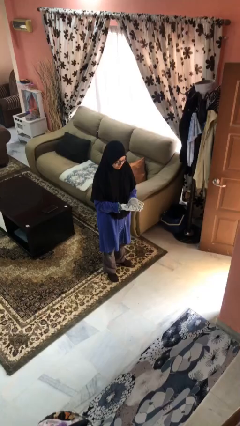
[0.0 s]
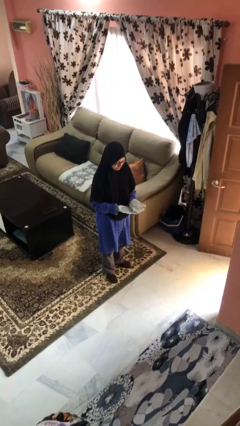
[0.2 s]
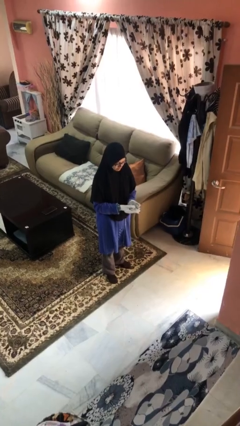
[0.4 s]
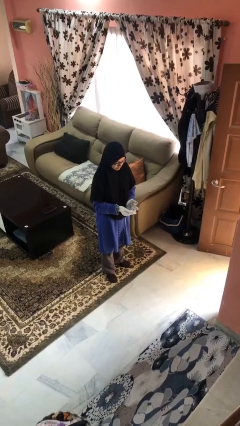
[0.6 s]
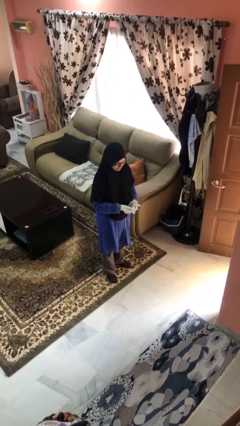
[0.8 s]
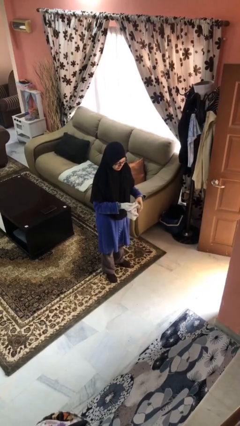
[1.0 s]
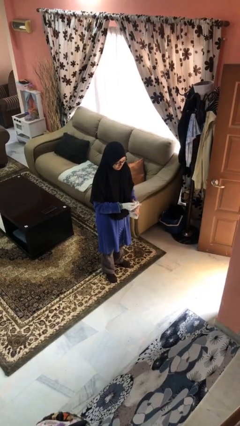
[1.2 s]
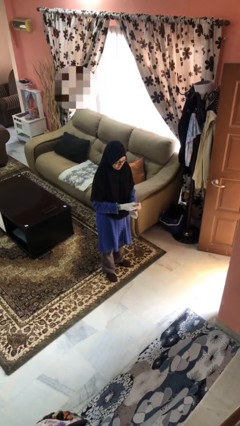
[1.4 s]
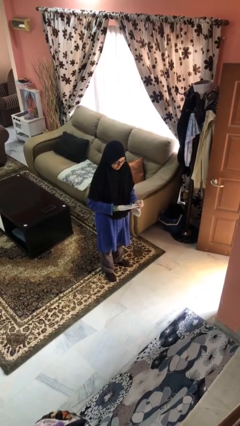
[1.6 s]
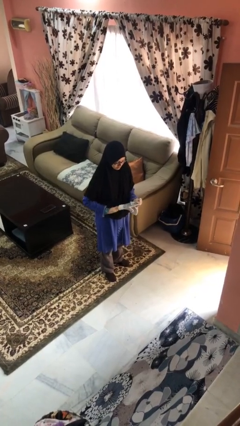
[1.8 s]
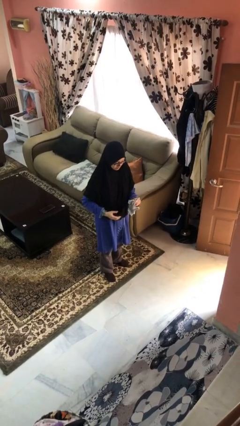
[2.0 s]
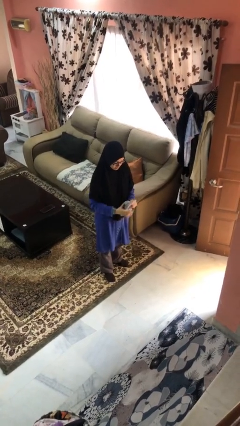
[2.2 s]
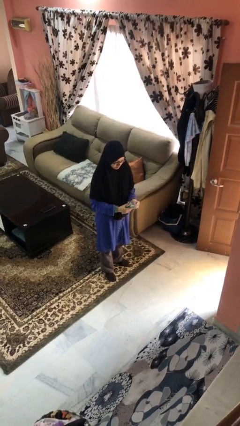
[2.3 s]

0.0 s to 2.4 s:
person takes off gloves

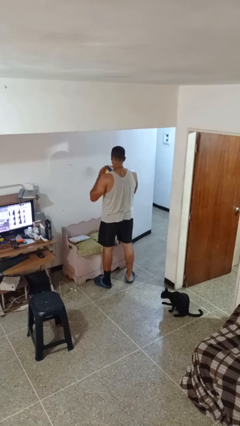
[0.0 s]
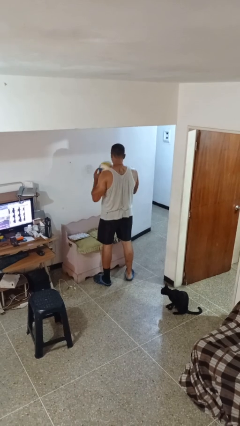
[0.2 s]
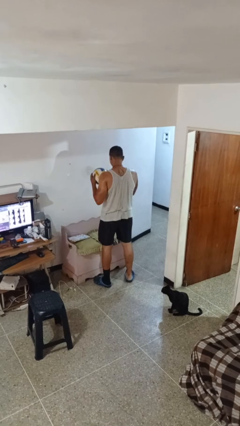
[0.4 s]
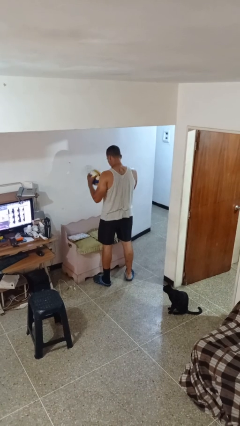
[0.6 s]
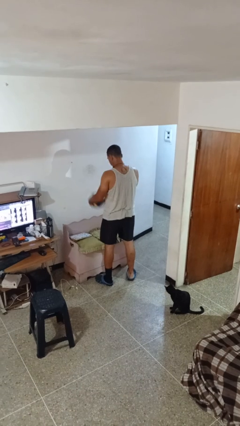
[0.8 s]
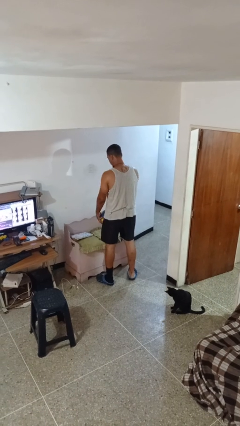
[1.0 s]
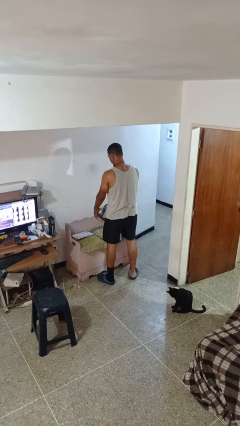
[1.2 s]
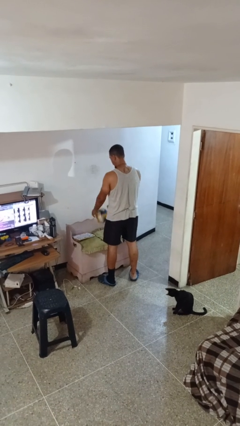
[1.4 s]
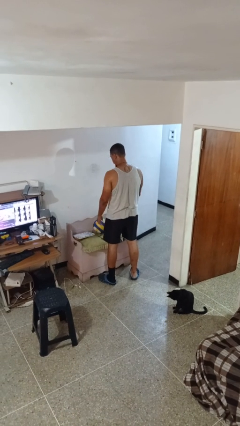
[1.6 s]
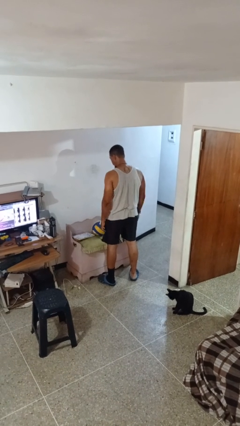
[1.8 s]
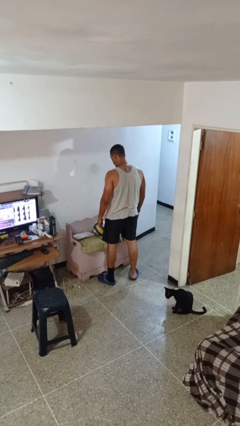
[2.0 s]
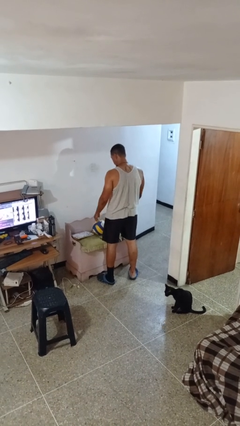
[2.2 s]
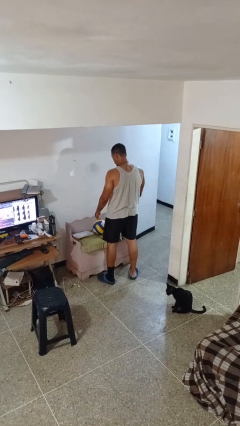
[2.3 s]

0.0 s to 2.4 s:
person puts down object on couch

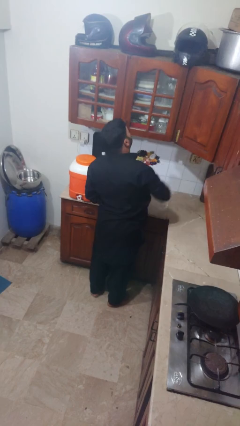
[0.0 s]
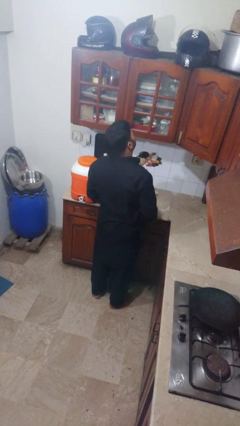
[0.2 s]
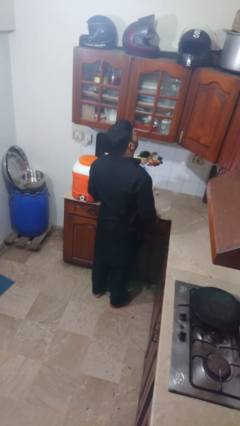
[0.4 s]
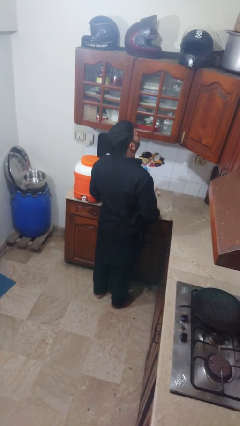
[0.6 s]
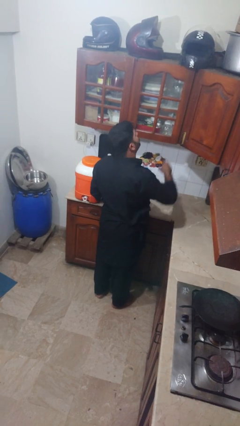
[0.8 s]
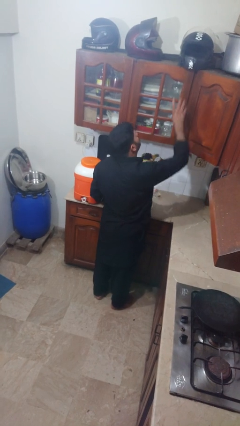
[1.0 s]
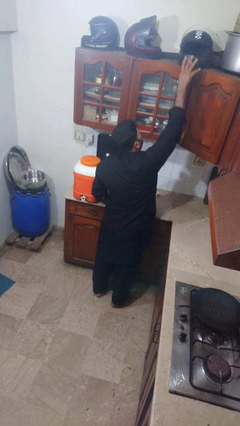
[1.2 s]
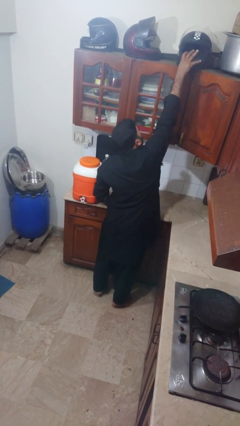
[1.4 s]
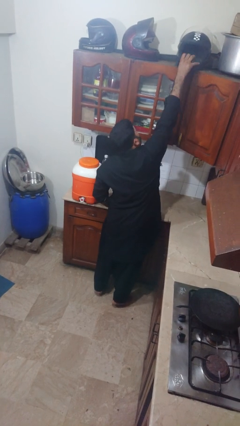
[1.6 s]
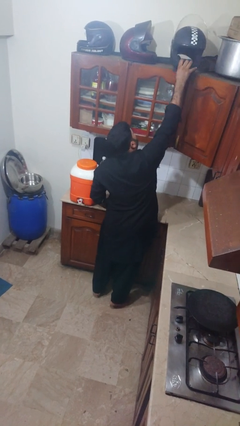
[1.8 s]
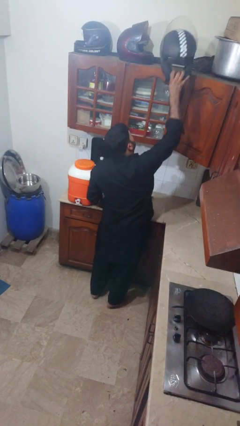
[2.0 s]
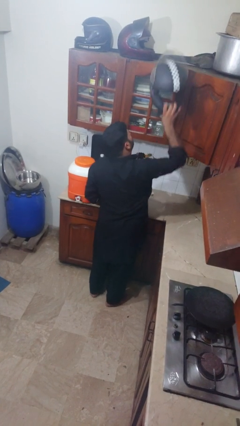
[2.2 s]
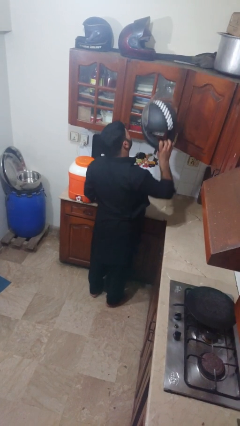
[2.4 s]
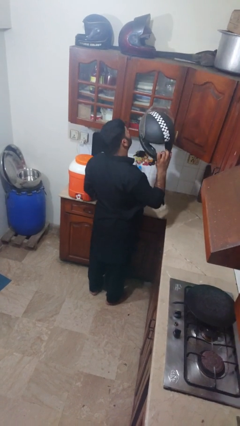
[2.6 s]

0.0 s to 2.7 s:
person picks up object from shelf

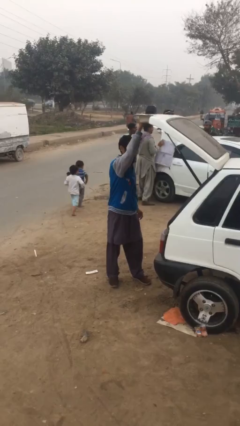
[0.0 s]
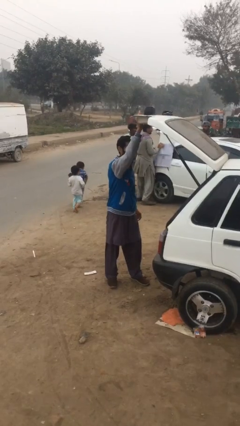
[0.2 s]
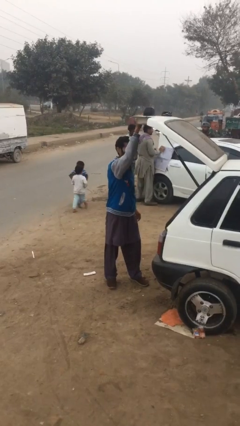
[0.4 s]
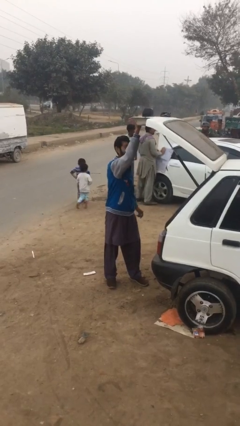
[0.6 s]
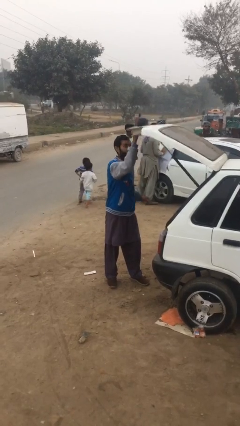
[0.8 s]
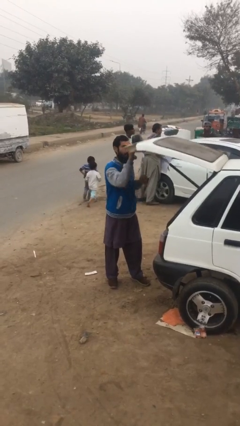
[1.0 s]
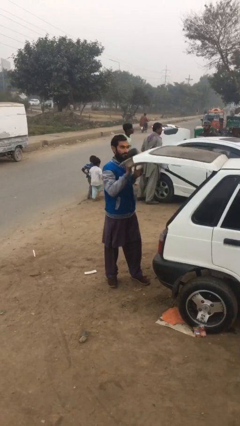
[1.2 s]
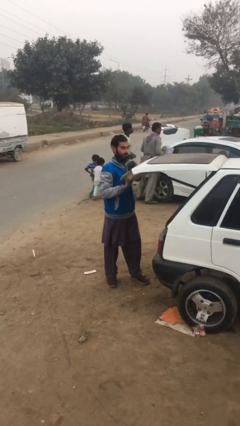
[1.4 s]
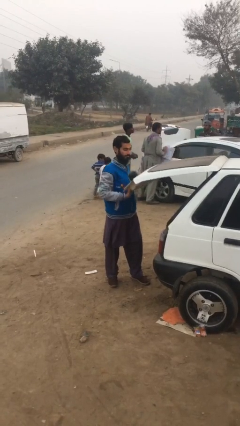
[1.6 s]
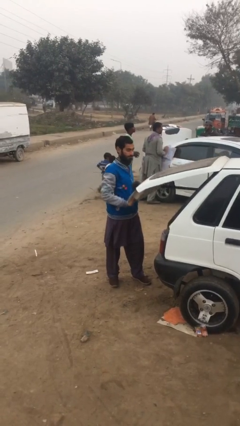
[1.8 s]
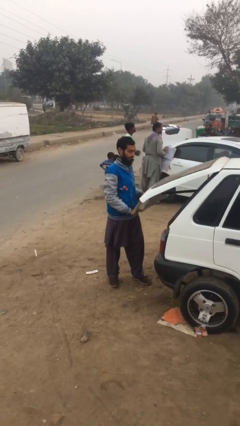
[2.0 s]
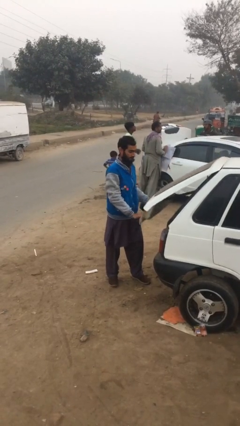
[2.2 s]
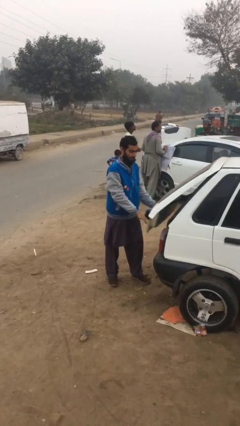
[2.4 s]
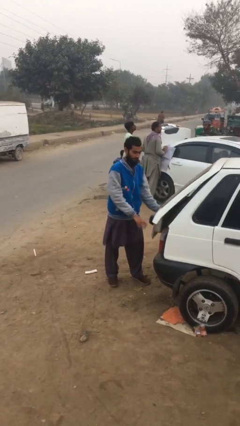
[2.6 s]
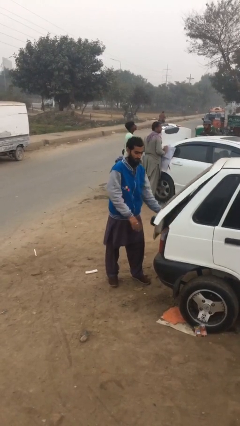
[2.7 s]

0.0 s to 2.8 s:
person closes car trunk

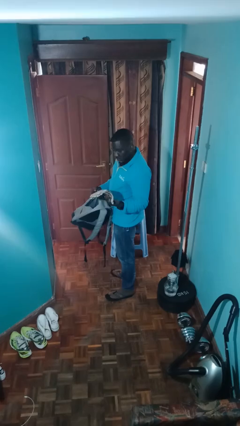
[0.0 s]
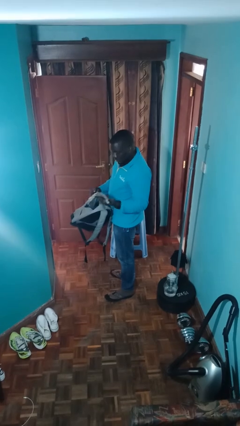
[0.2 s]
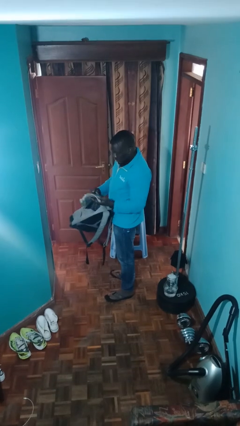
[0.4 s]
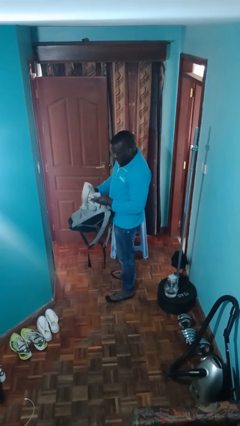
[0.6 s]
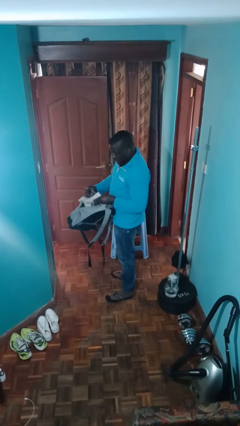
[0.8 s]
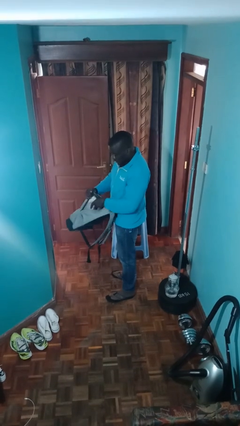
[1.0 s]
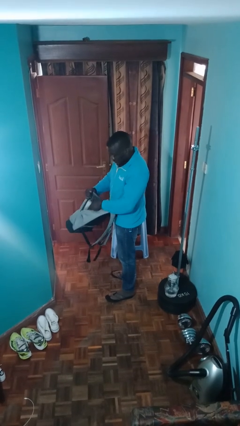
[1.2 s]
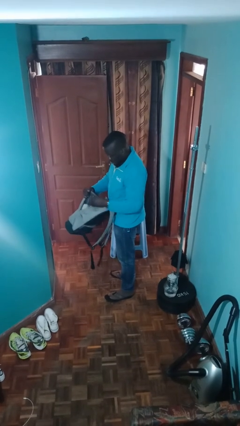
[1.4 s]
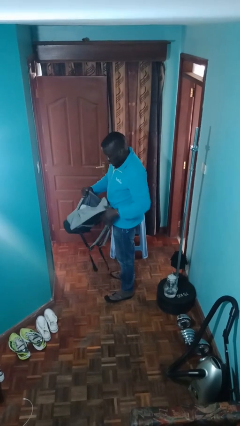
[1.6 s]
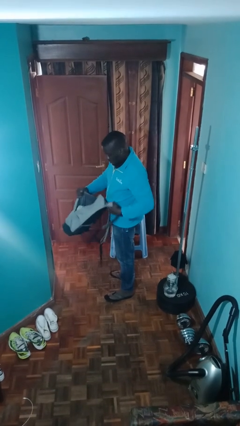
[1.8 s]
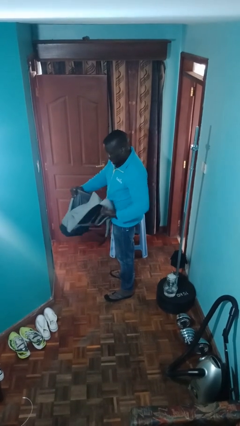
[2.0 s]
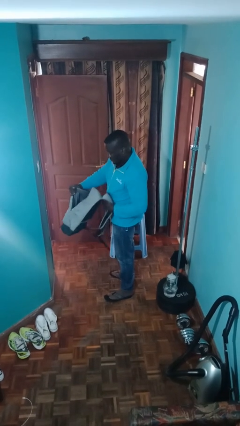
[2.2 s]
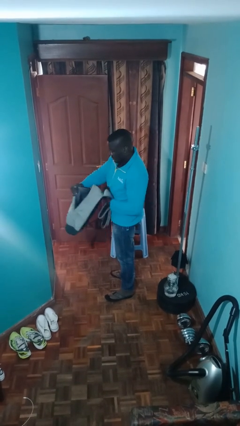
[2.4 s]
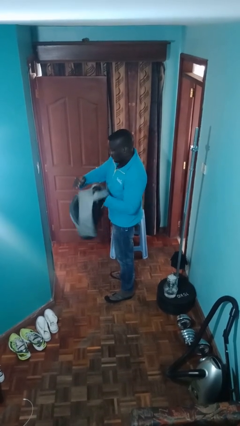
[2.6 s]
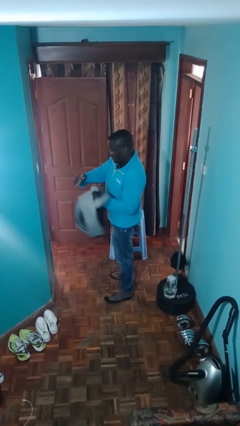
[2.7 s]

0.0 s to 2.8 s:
person puts object into backpack

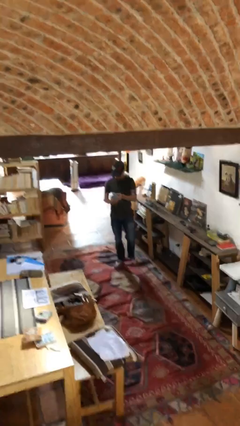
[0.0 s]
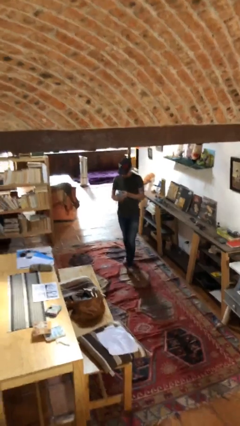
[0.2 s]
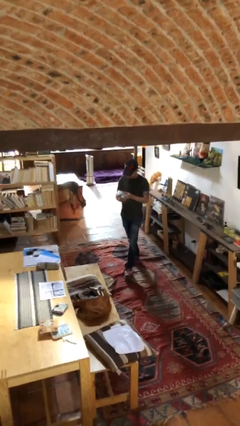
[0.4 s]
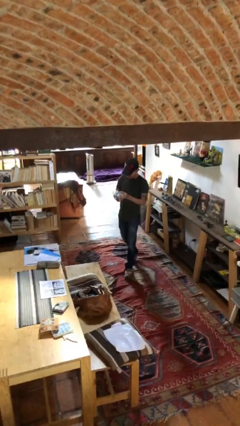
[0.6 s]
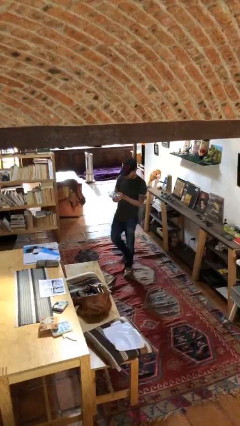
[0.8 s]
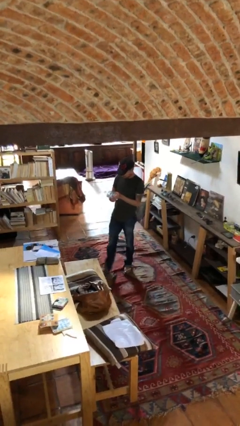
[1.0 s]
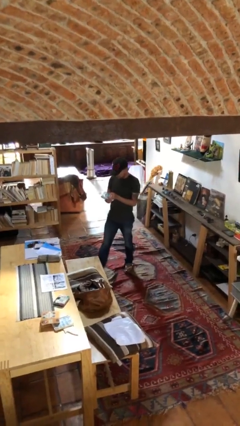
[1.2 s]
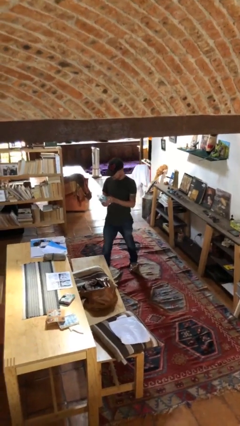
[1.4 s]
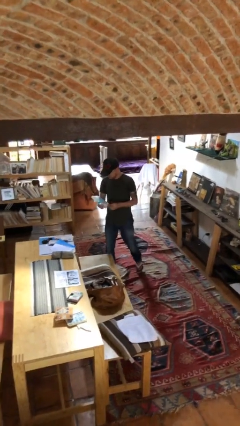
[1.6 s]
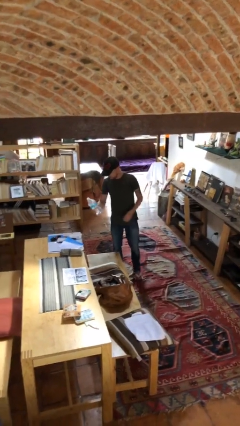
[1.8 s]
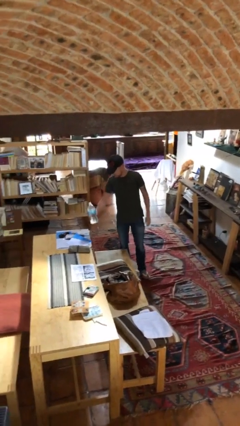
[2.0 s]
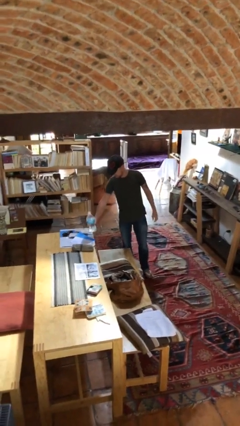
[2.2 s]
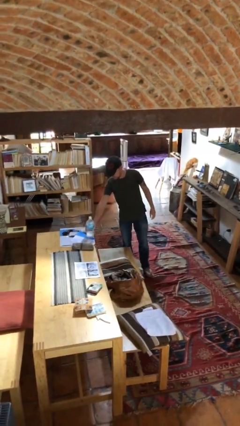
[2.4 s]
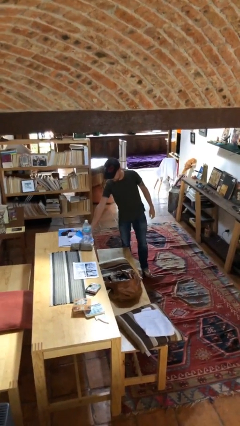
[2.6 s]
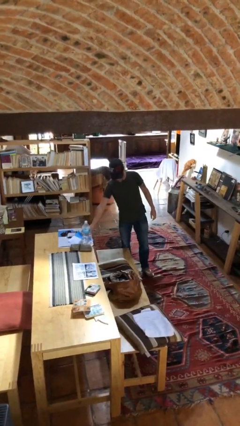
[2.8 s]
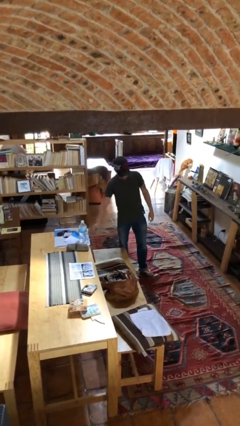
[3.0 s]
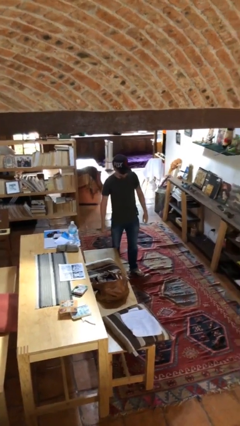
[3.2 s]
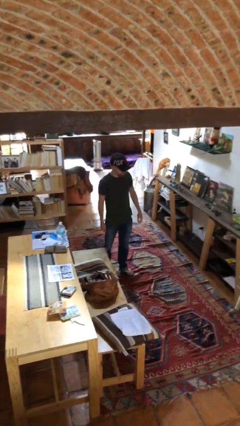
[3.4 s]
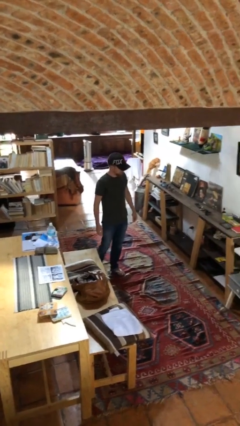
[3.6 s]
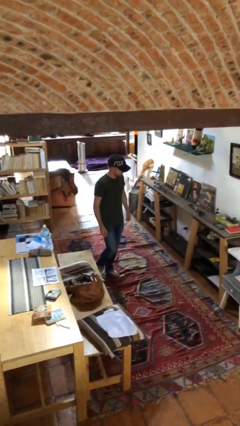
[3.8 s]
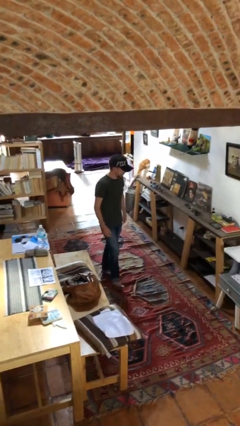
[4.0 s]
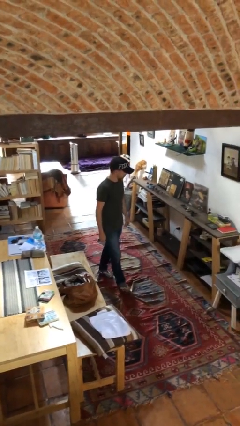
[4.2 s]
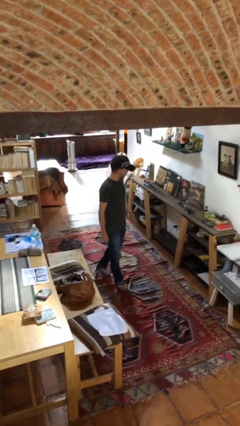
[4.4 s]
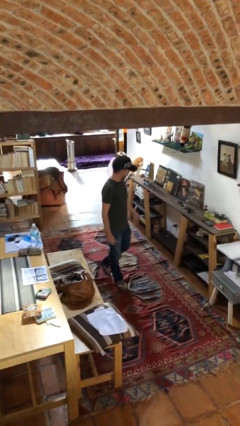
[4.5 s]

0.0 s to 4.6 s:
person puts down object on table

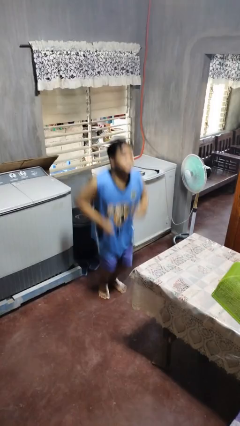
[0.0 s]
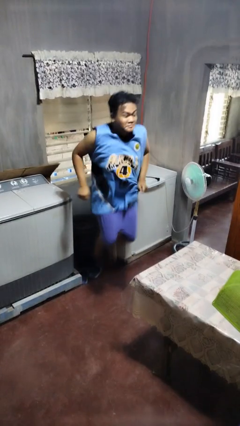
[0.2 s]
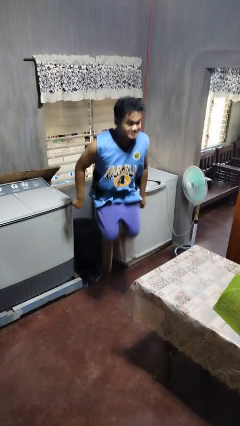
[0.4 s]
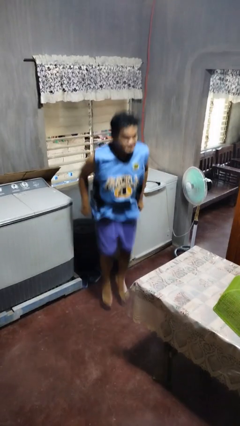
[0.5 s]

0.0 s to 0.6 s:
person jumps
